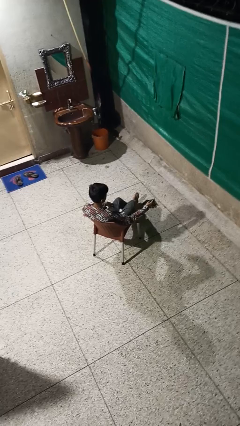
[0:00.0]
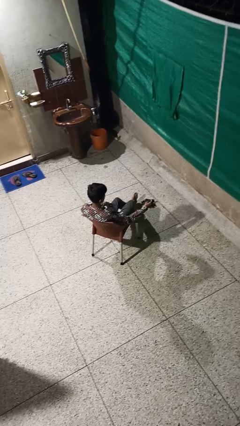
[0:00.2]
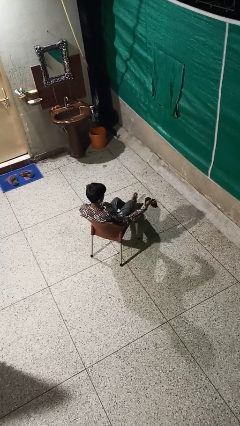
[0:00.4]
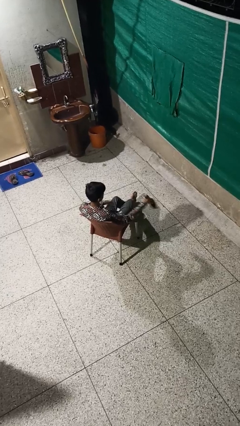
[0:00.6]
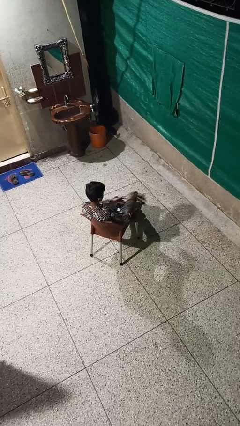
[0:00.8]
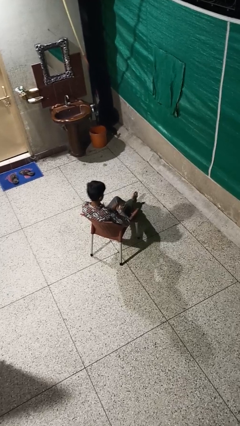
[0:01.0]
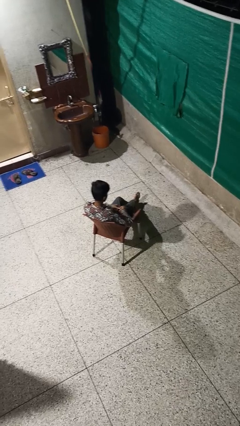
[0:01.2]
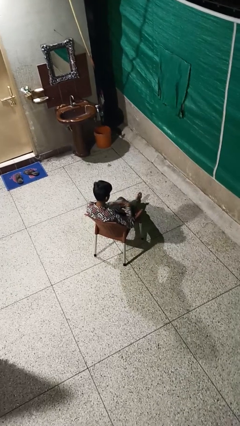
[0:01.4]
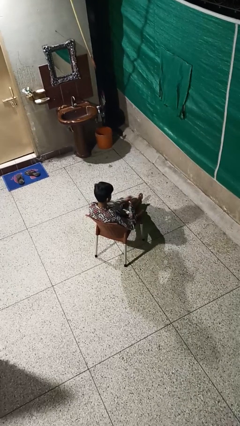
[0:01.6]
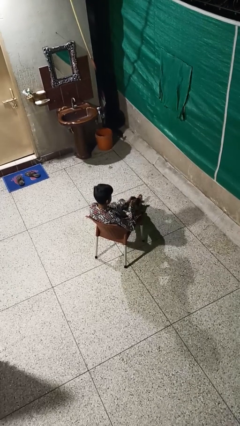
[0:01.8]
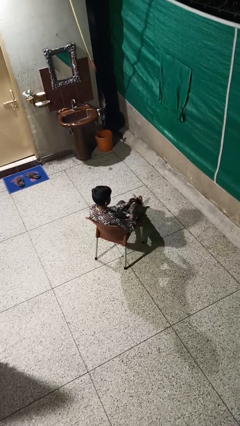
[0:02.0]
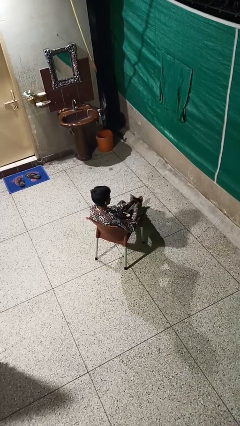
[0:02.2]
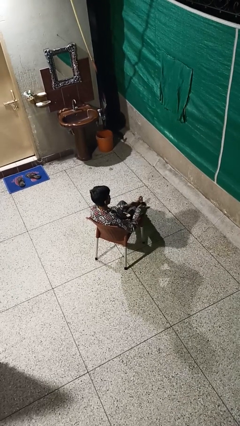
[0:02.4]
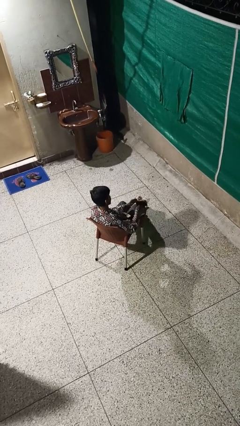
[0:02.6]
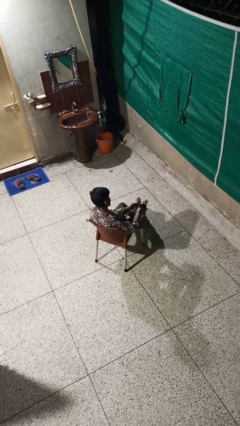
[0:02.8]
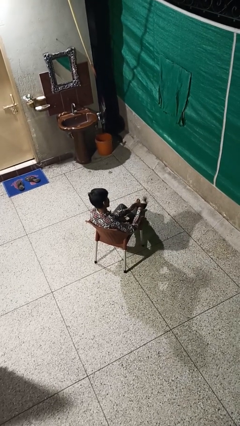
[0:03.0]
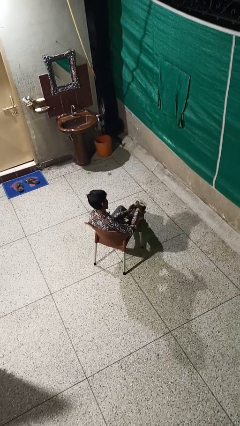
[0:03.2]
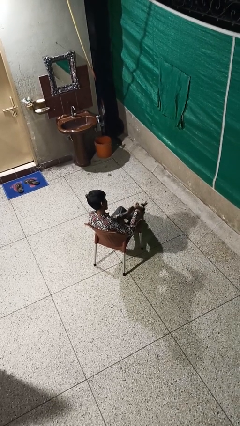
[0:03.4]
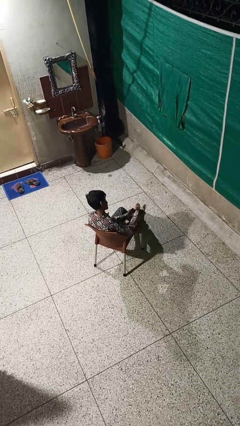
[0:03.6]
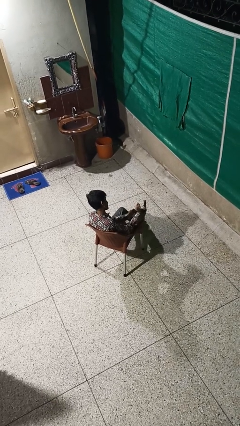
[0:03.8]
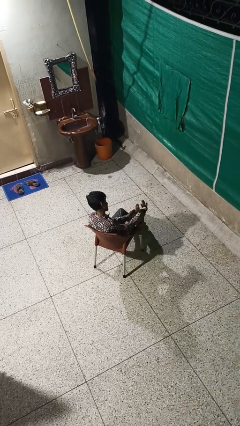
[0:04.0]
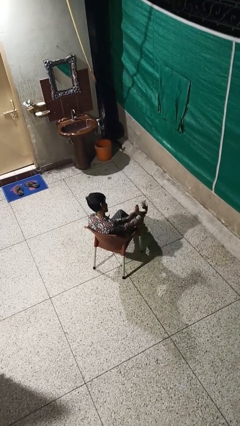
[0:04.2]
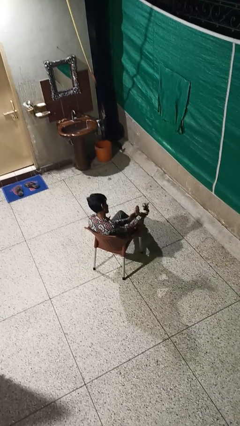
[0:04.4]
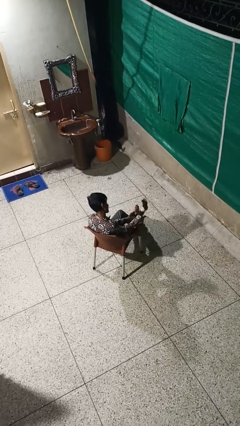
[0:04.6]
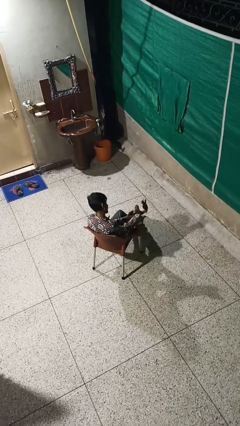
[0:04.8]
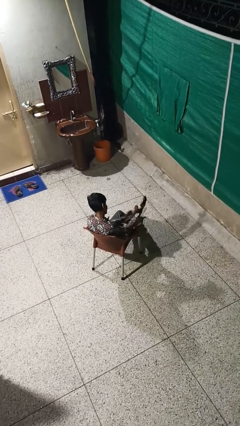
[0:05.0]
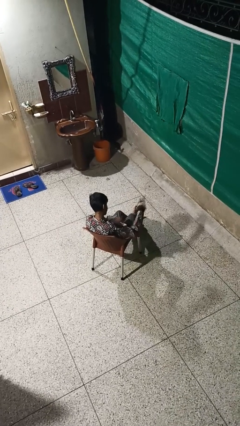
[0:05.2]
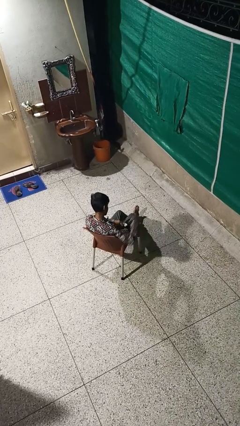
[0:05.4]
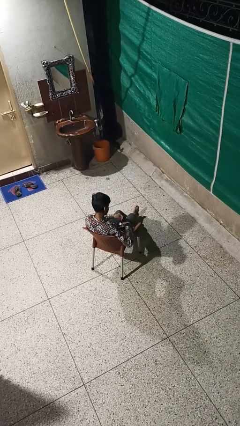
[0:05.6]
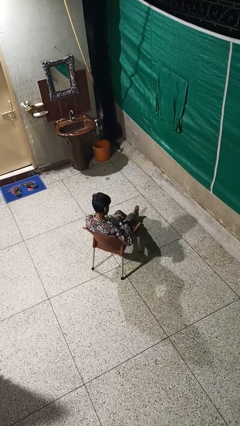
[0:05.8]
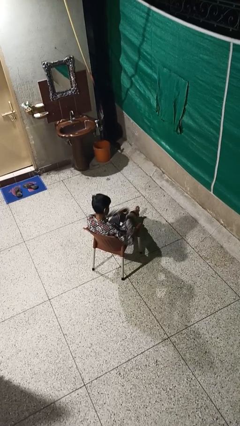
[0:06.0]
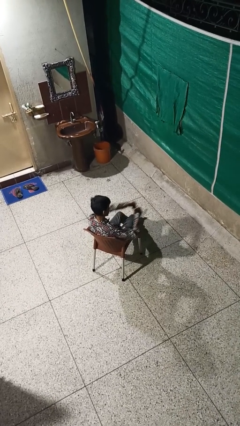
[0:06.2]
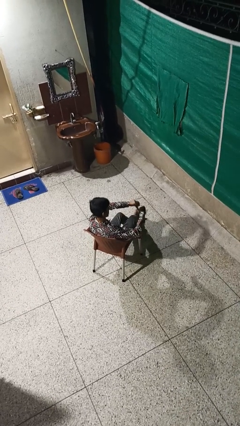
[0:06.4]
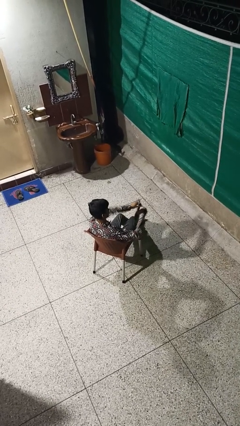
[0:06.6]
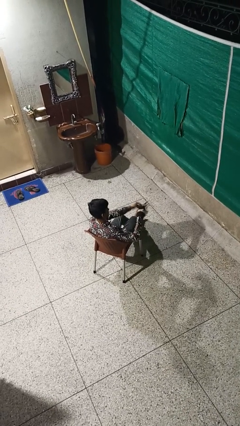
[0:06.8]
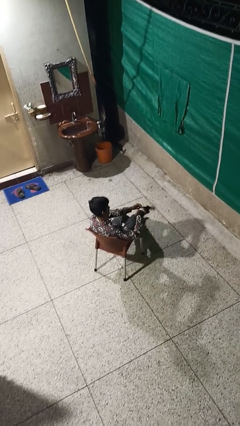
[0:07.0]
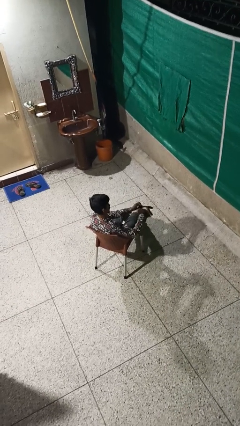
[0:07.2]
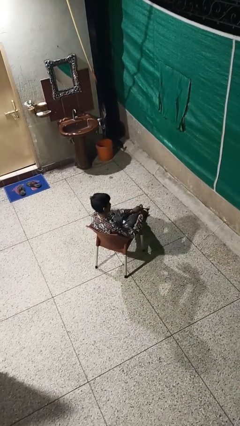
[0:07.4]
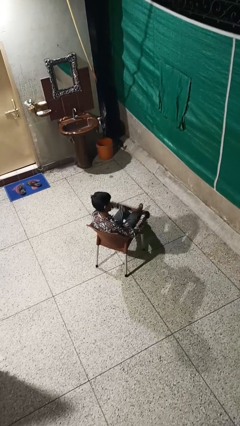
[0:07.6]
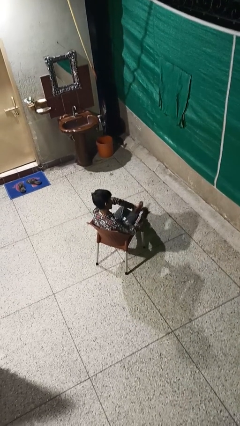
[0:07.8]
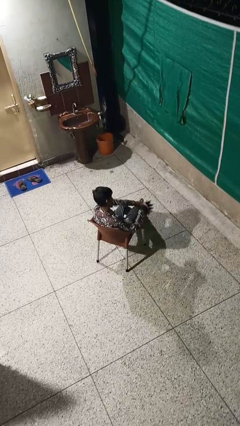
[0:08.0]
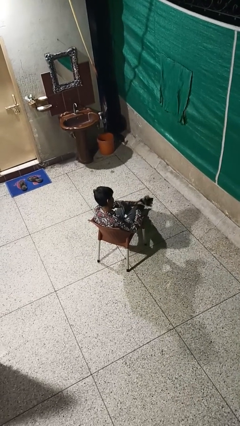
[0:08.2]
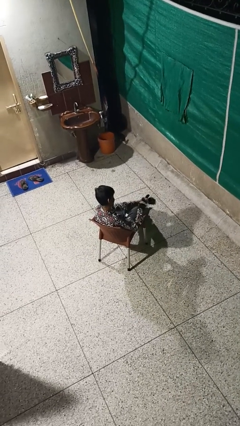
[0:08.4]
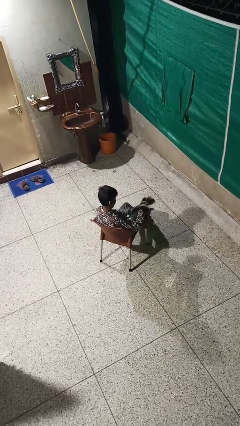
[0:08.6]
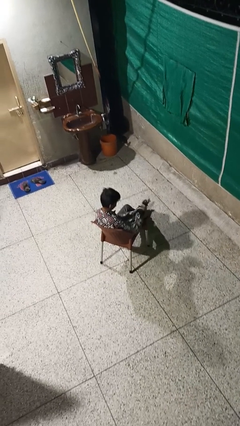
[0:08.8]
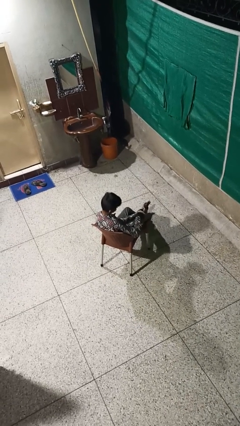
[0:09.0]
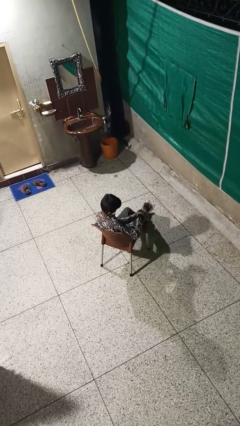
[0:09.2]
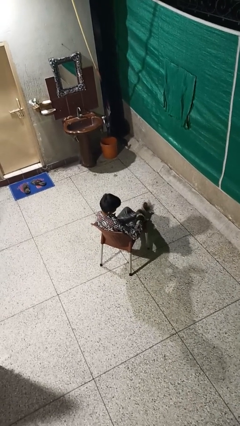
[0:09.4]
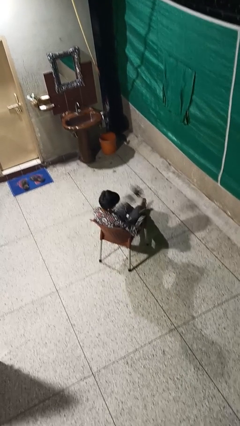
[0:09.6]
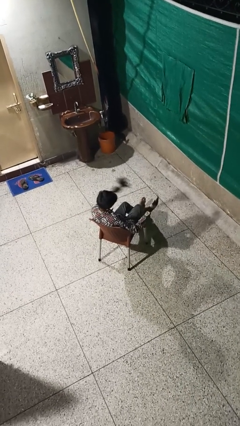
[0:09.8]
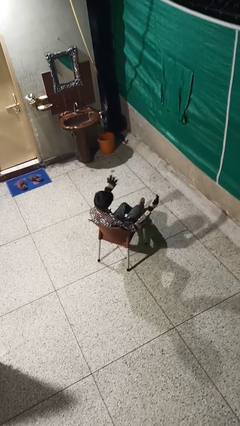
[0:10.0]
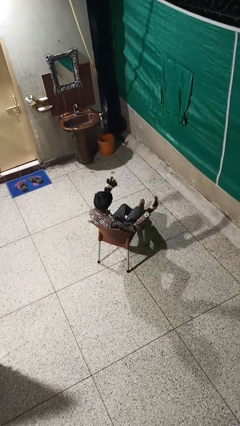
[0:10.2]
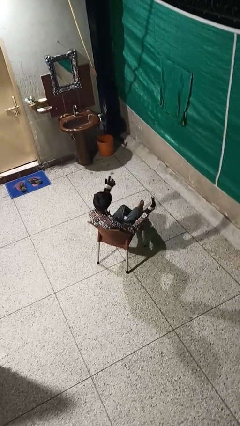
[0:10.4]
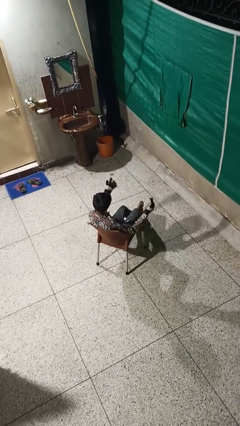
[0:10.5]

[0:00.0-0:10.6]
person puts on gloves

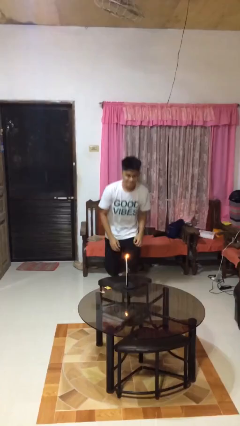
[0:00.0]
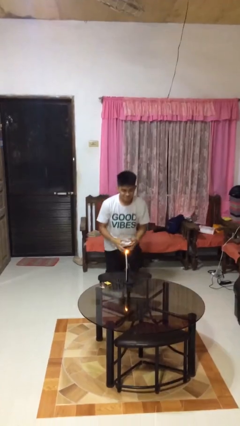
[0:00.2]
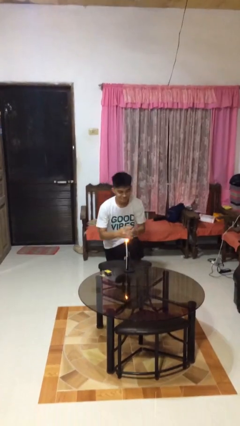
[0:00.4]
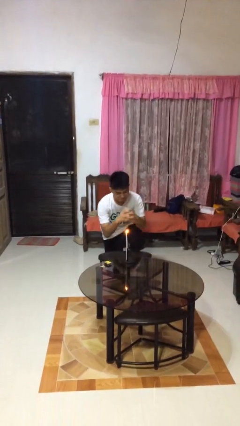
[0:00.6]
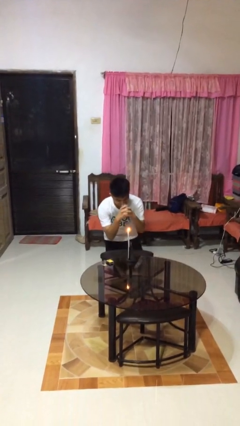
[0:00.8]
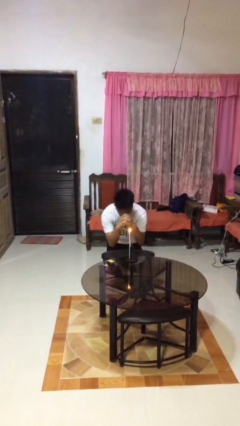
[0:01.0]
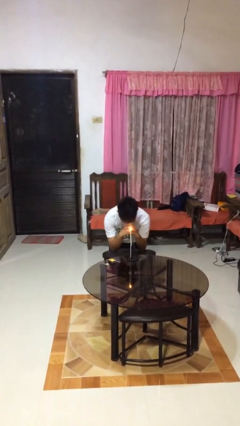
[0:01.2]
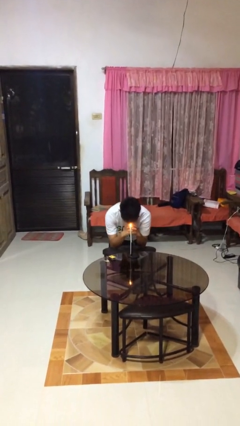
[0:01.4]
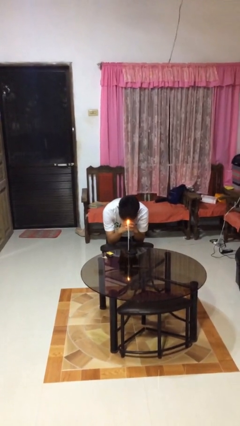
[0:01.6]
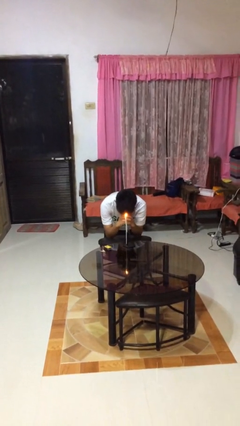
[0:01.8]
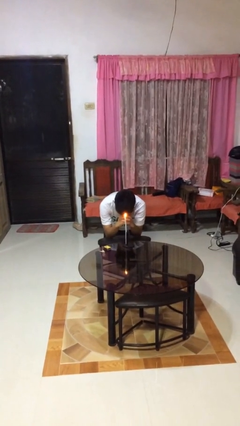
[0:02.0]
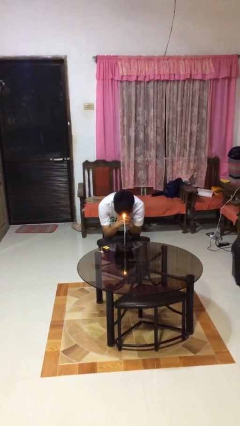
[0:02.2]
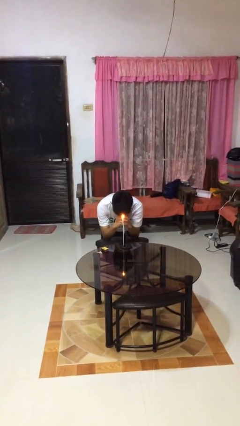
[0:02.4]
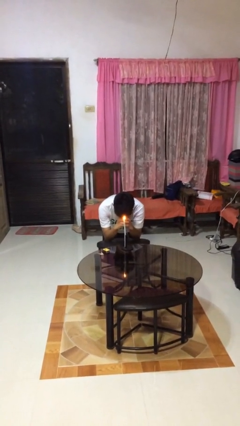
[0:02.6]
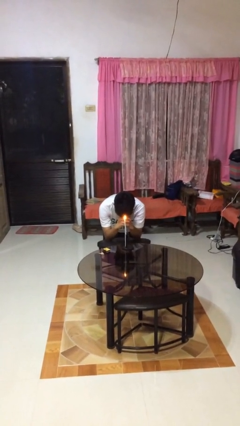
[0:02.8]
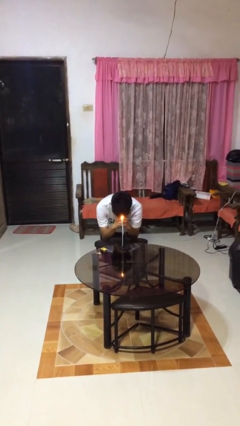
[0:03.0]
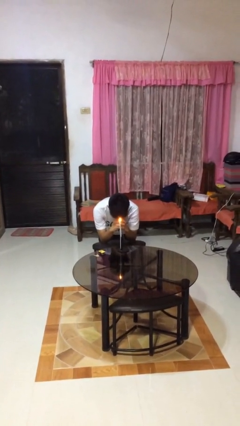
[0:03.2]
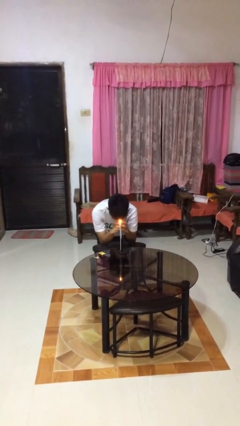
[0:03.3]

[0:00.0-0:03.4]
person prays

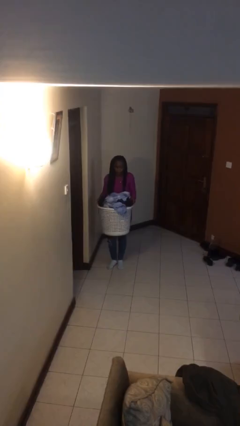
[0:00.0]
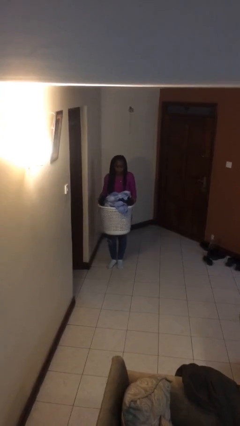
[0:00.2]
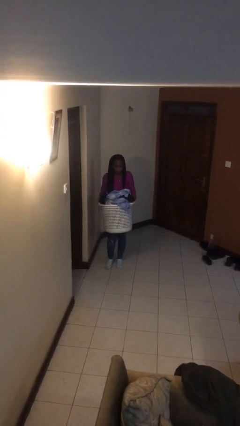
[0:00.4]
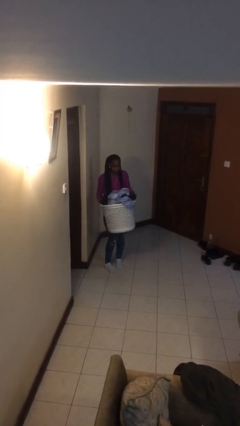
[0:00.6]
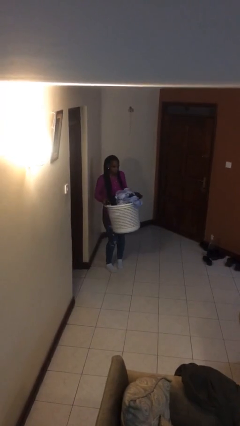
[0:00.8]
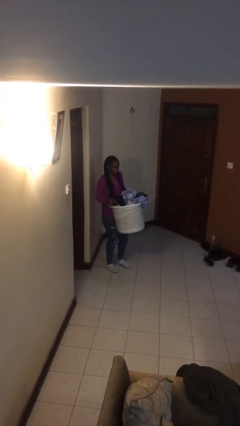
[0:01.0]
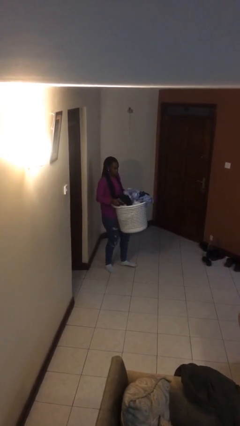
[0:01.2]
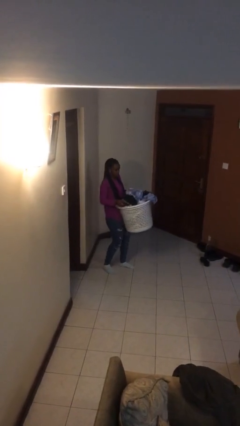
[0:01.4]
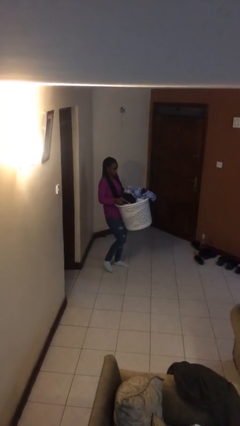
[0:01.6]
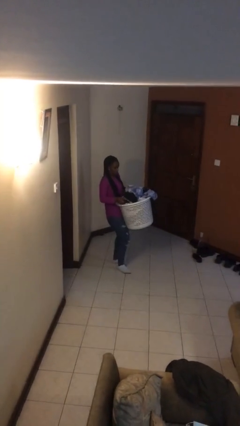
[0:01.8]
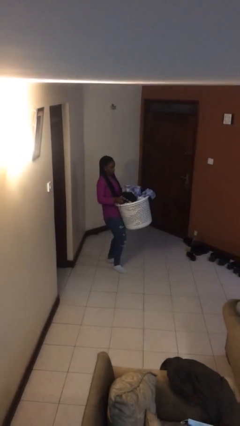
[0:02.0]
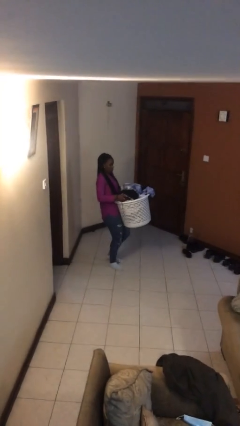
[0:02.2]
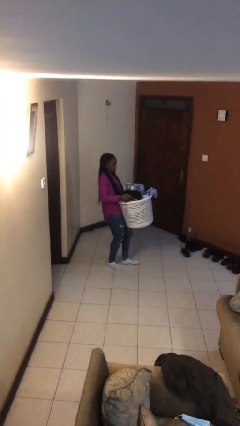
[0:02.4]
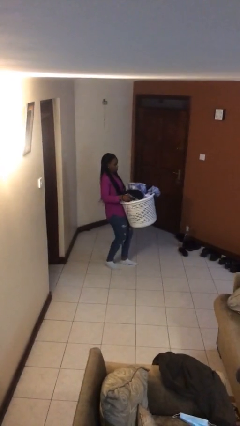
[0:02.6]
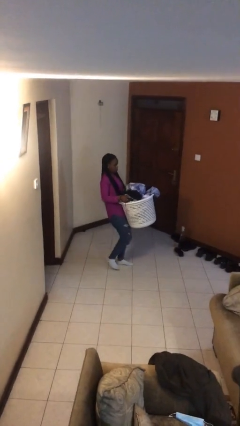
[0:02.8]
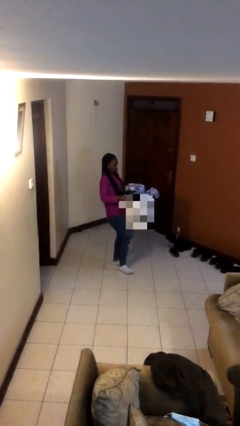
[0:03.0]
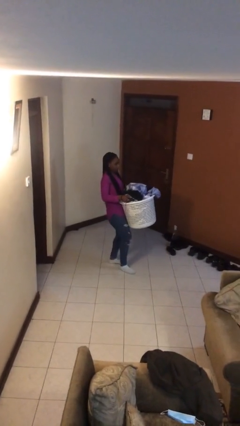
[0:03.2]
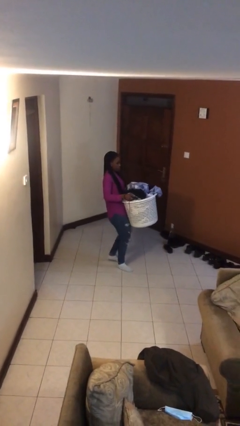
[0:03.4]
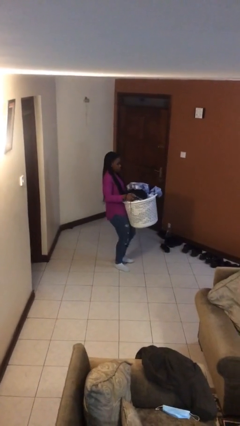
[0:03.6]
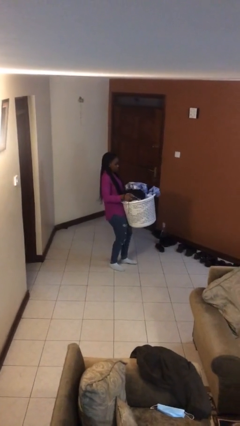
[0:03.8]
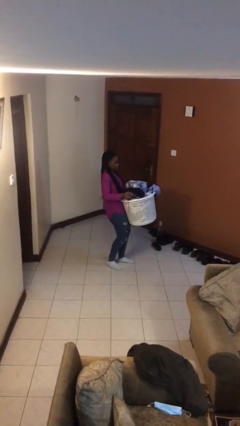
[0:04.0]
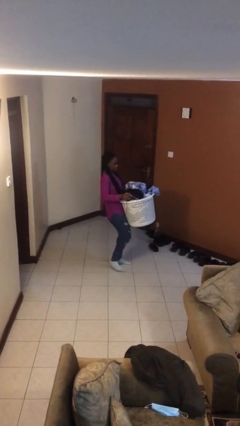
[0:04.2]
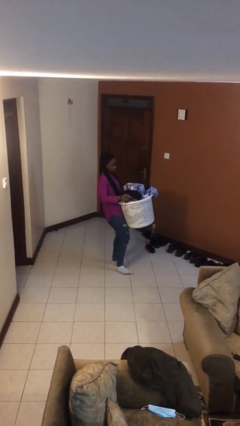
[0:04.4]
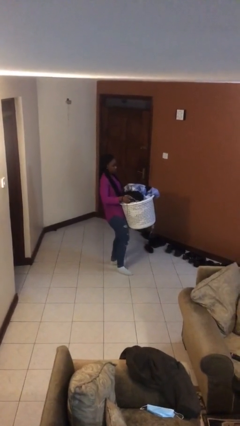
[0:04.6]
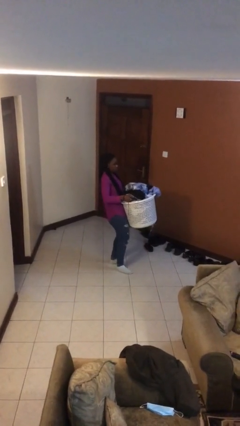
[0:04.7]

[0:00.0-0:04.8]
person carries heavy object
